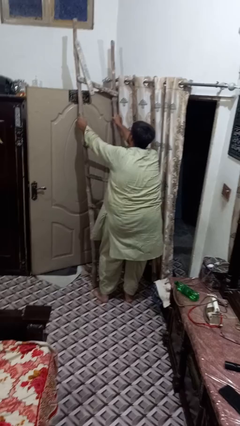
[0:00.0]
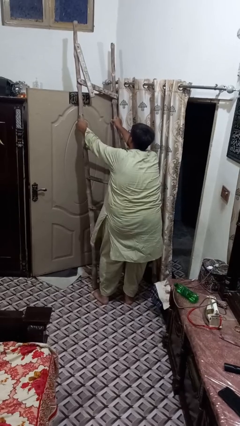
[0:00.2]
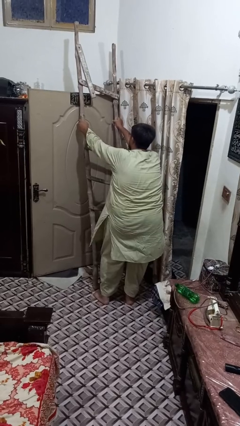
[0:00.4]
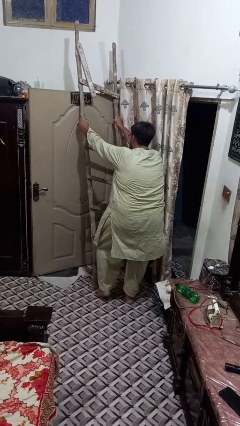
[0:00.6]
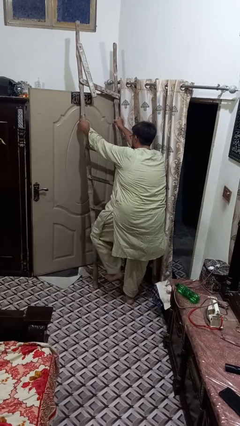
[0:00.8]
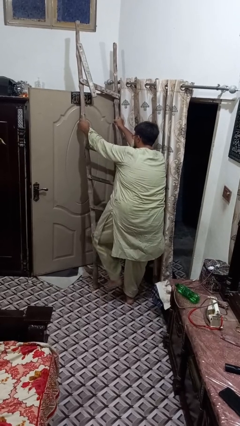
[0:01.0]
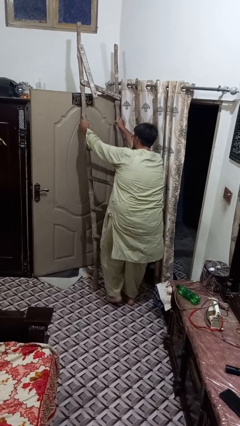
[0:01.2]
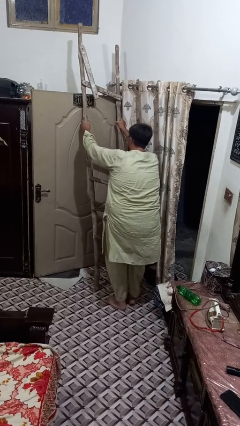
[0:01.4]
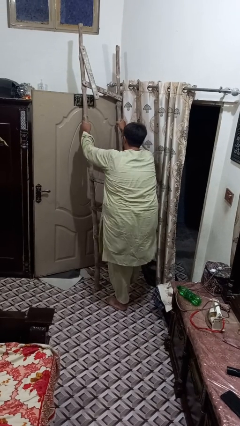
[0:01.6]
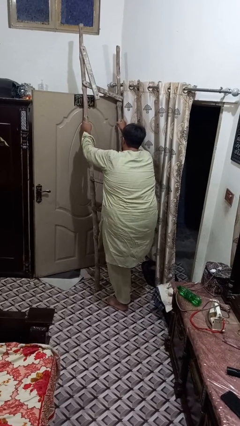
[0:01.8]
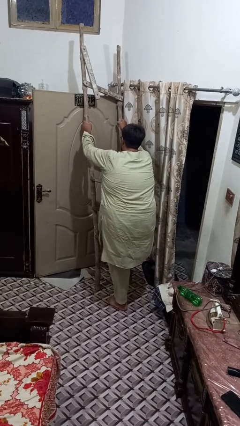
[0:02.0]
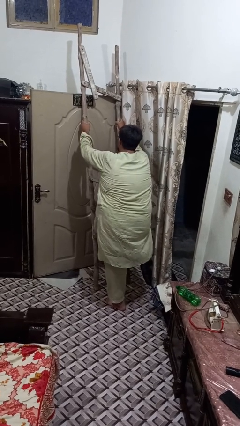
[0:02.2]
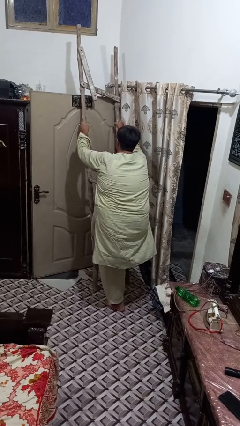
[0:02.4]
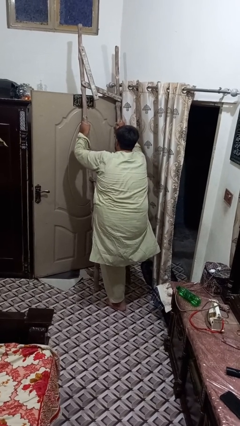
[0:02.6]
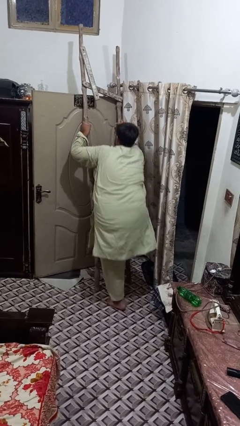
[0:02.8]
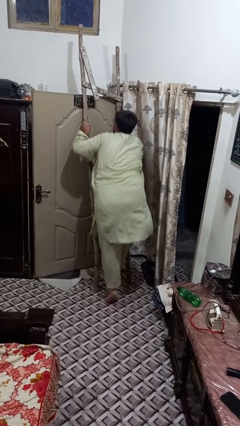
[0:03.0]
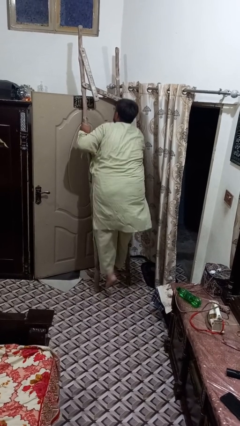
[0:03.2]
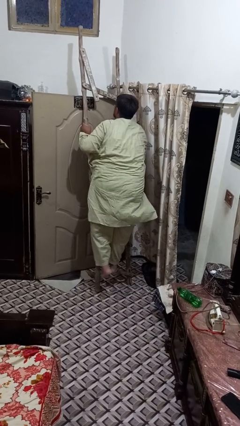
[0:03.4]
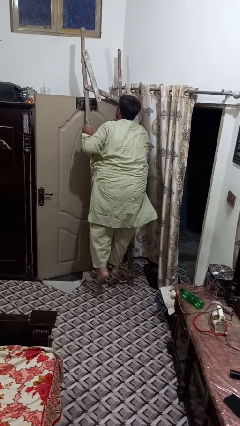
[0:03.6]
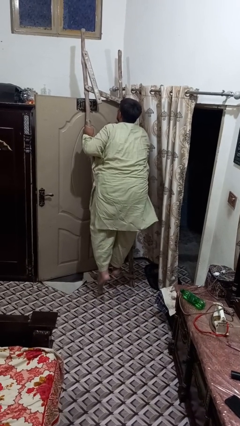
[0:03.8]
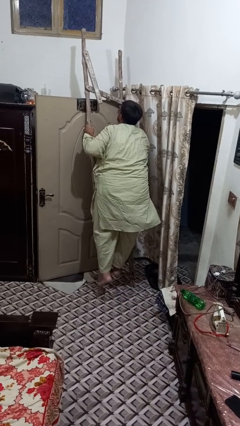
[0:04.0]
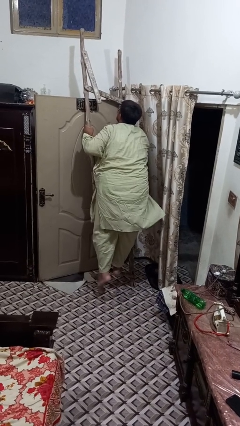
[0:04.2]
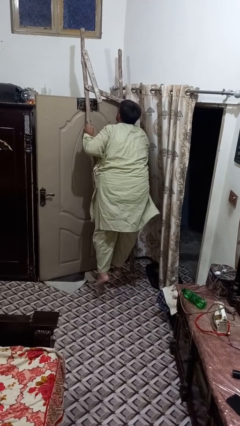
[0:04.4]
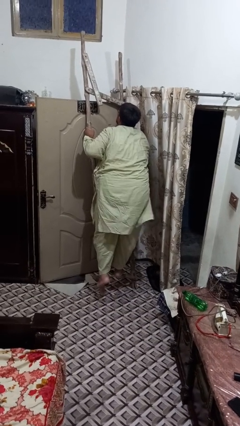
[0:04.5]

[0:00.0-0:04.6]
person climbs up ladder

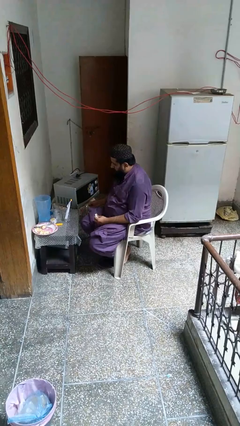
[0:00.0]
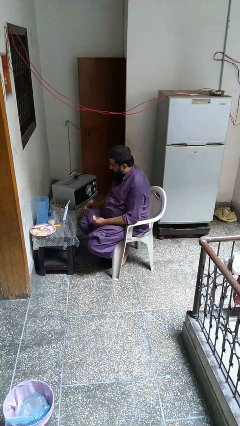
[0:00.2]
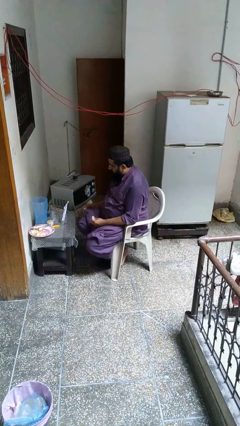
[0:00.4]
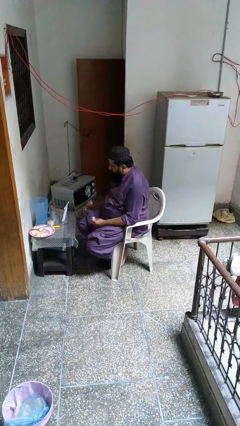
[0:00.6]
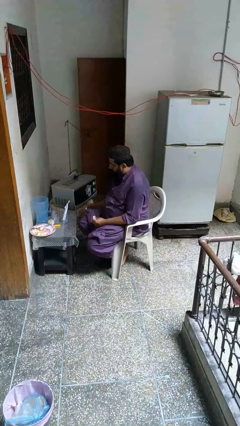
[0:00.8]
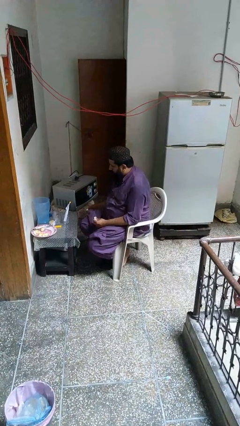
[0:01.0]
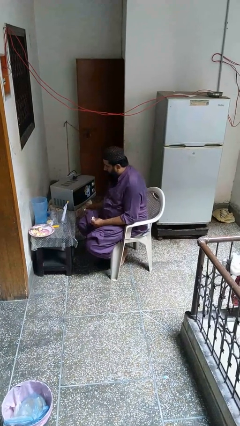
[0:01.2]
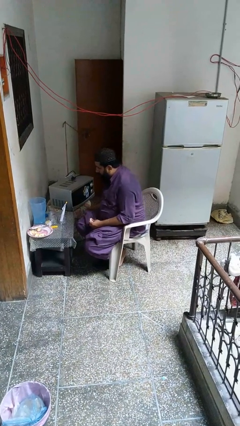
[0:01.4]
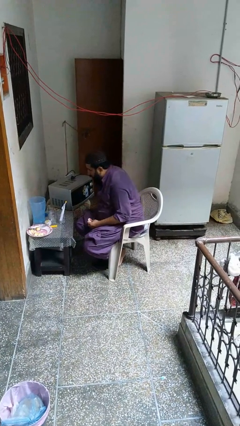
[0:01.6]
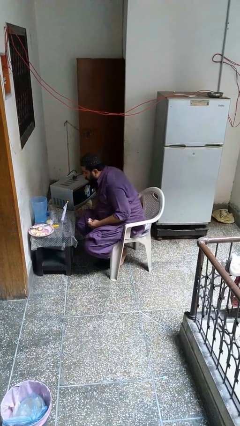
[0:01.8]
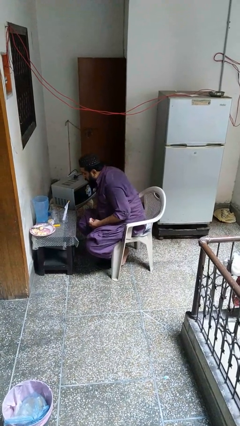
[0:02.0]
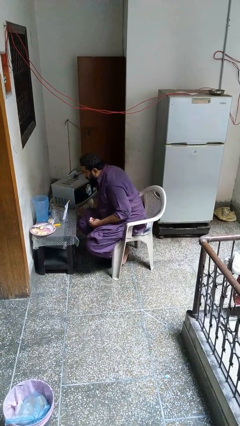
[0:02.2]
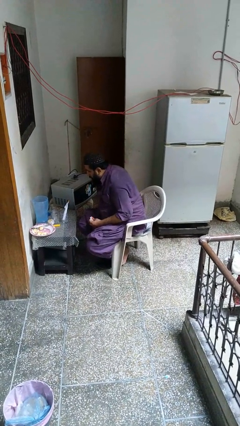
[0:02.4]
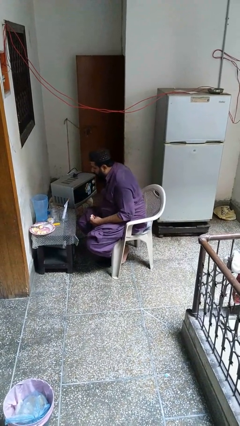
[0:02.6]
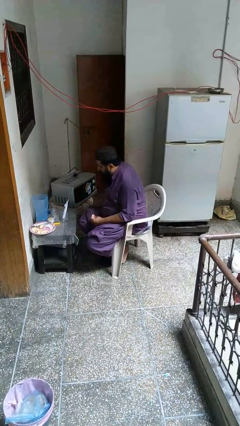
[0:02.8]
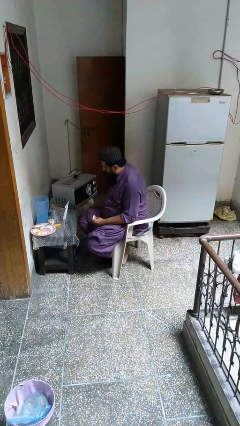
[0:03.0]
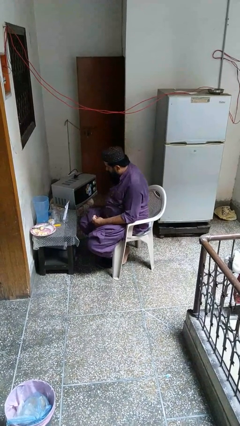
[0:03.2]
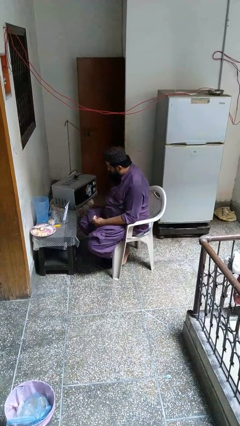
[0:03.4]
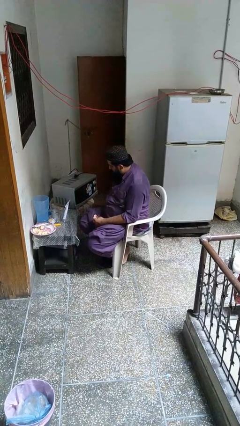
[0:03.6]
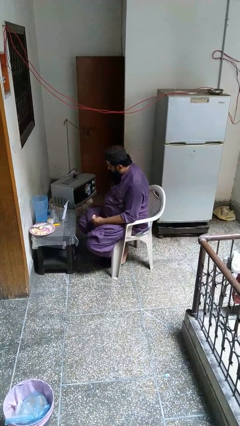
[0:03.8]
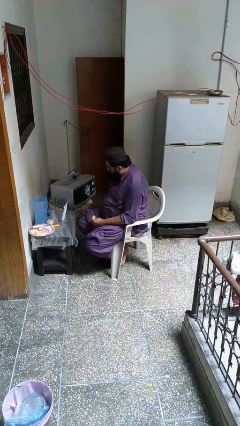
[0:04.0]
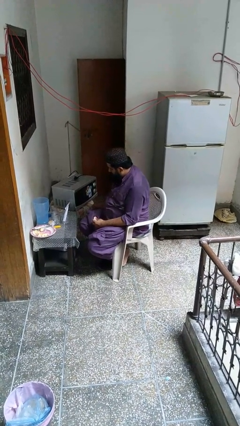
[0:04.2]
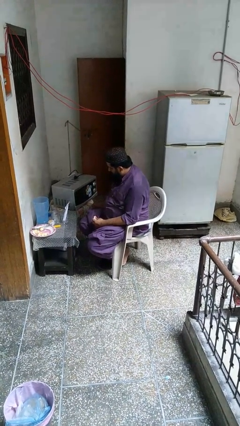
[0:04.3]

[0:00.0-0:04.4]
person extinguishes candle

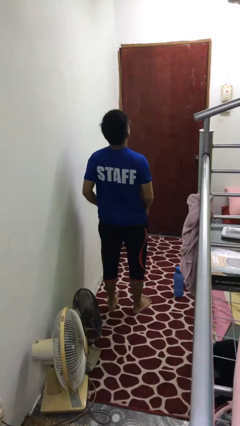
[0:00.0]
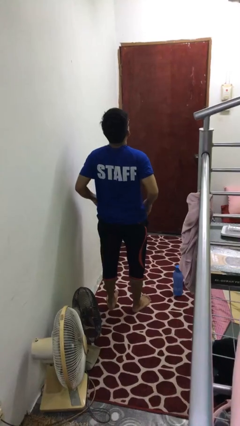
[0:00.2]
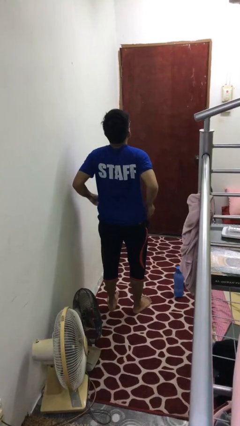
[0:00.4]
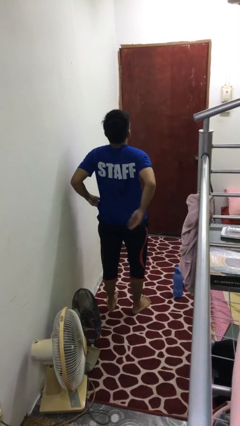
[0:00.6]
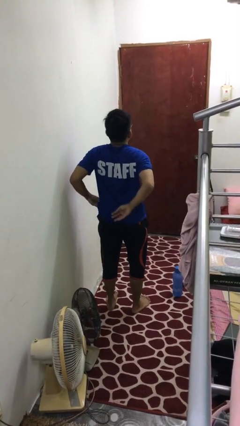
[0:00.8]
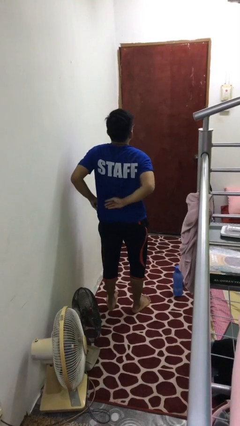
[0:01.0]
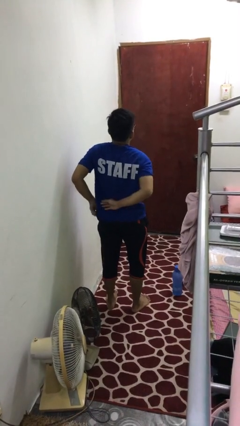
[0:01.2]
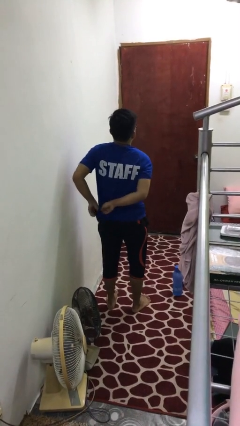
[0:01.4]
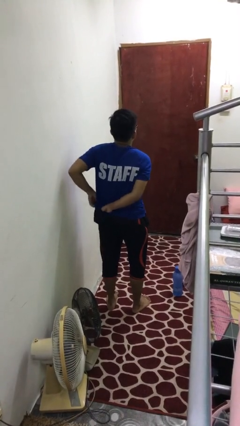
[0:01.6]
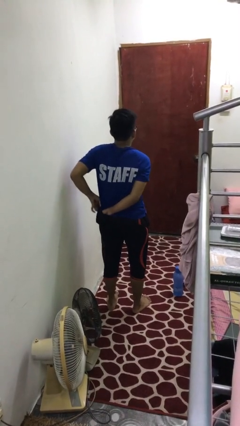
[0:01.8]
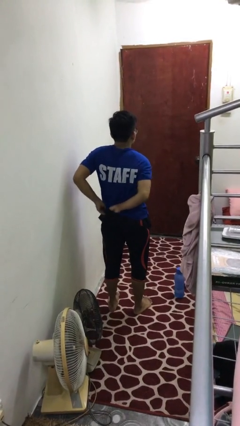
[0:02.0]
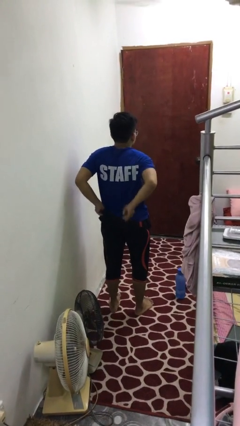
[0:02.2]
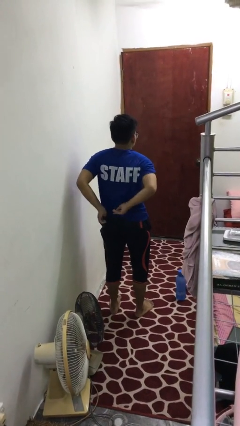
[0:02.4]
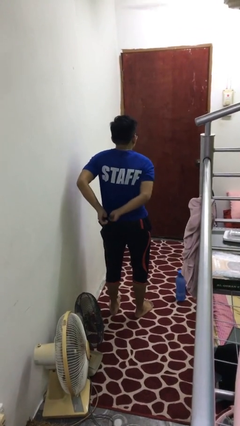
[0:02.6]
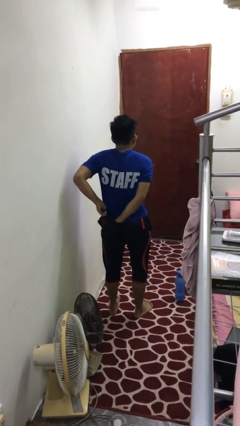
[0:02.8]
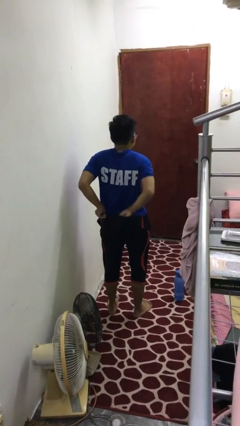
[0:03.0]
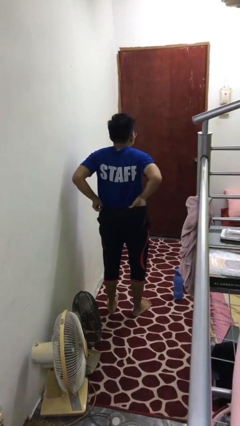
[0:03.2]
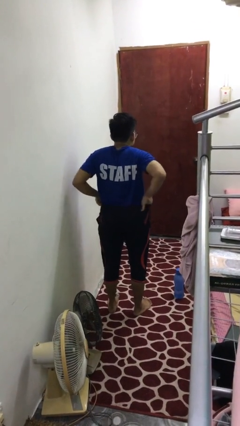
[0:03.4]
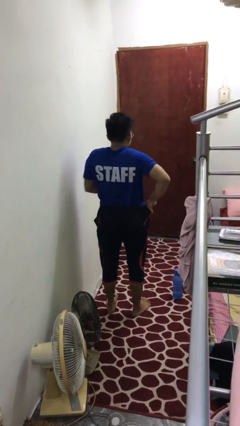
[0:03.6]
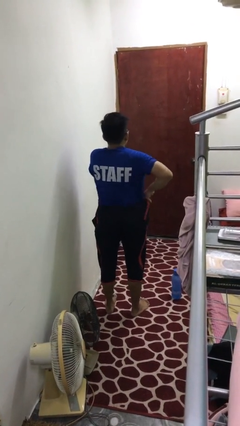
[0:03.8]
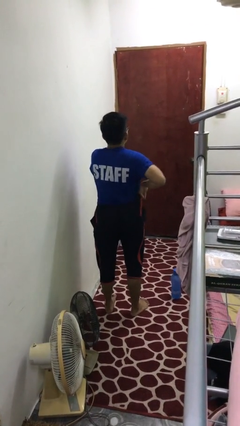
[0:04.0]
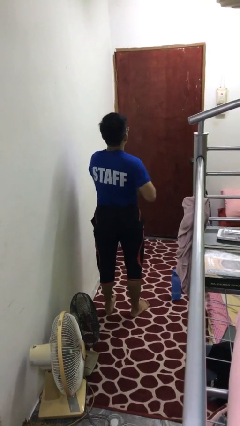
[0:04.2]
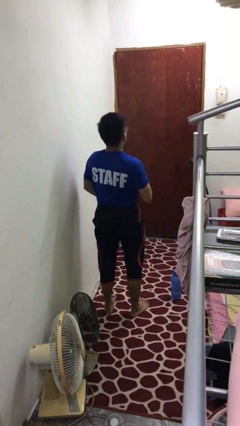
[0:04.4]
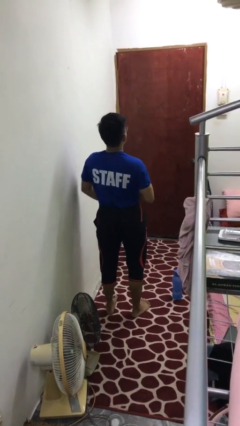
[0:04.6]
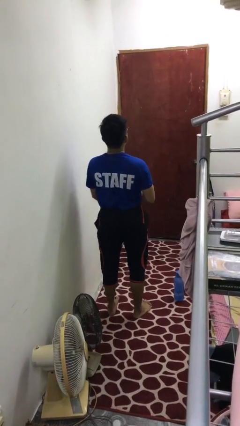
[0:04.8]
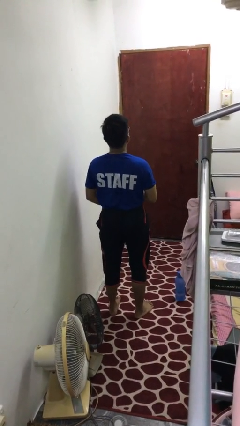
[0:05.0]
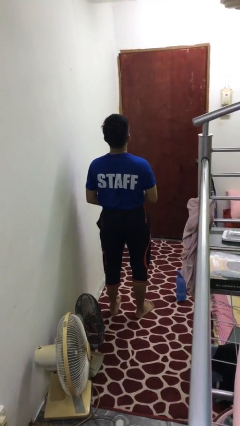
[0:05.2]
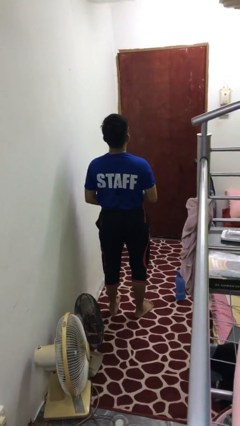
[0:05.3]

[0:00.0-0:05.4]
person tucks in shirt

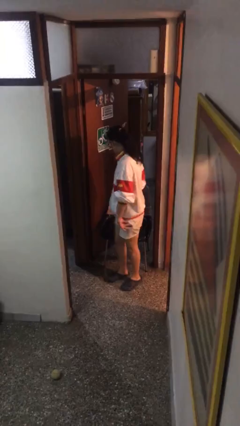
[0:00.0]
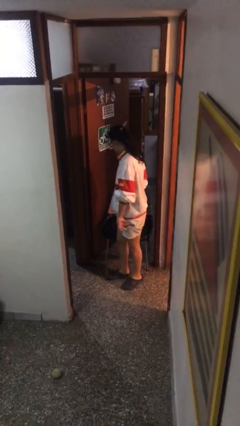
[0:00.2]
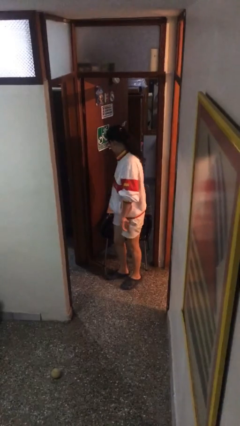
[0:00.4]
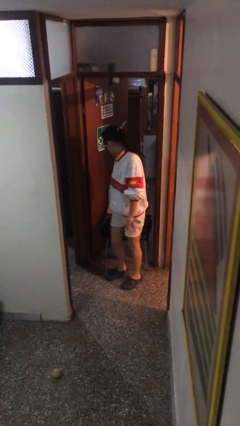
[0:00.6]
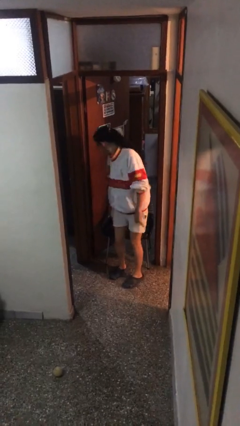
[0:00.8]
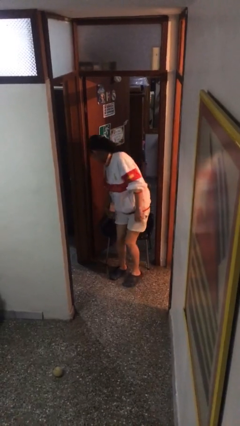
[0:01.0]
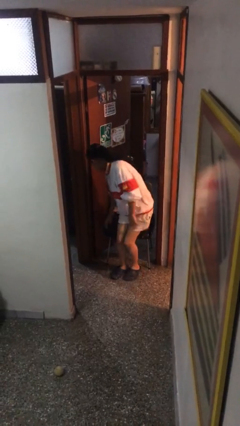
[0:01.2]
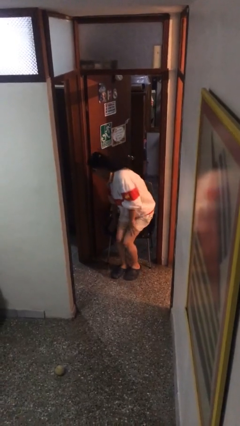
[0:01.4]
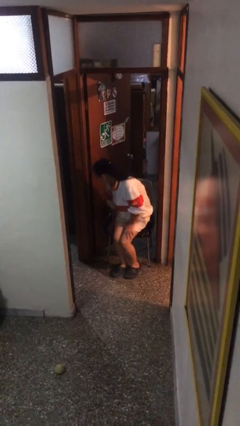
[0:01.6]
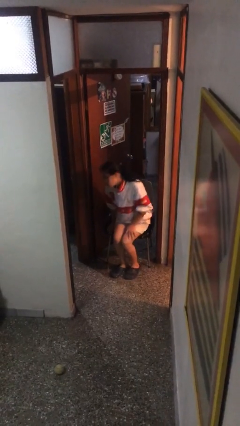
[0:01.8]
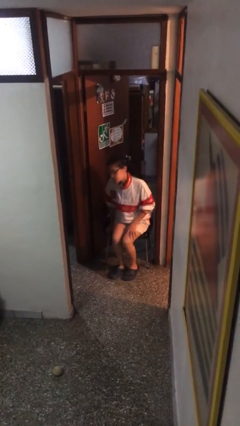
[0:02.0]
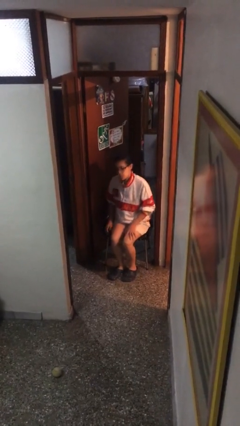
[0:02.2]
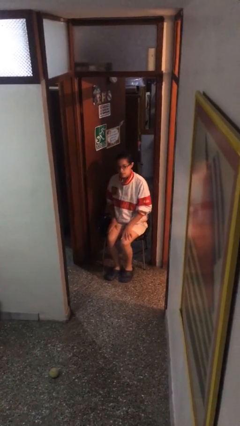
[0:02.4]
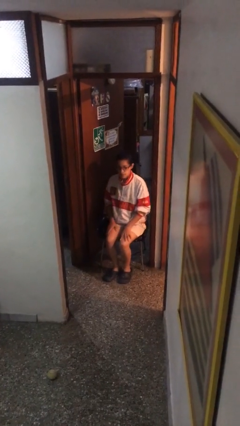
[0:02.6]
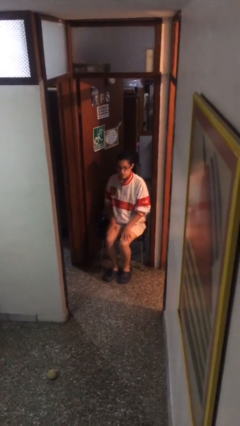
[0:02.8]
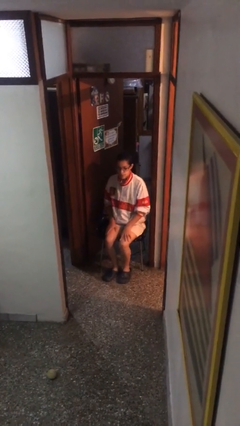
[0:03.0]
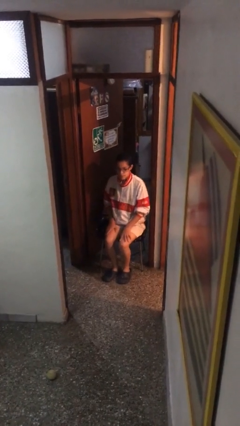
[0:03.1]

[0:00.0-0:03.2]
person sits down

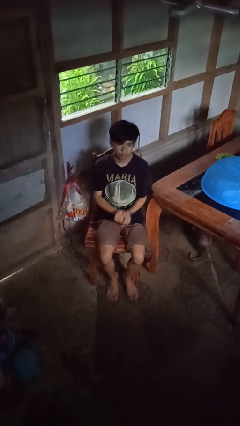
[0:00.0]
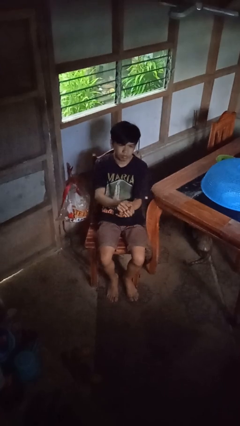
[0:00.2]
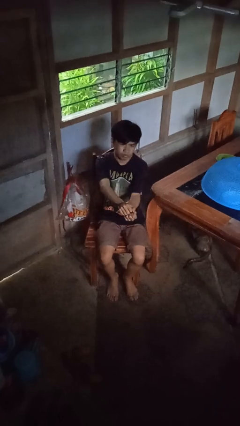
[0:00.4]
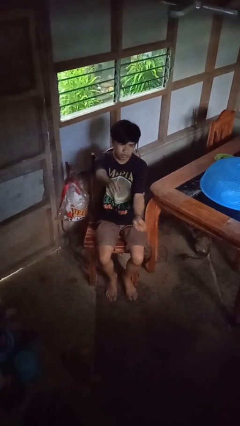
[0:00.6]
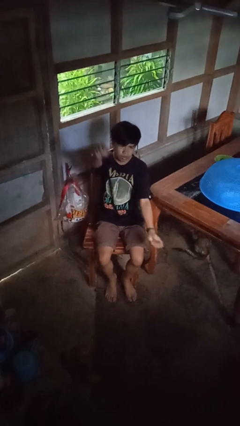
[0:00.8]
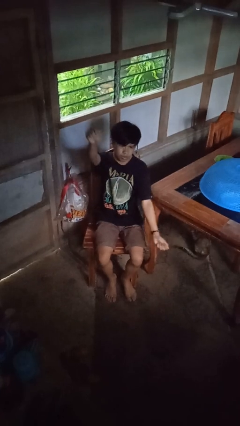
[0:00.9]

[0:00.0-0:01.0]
person gestures zoom out
